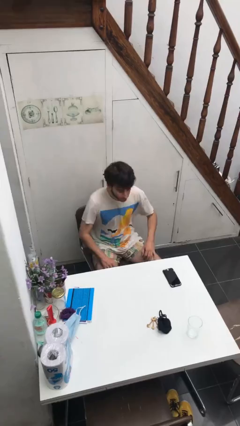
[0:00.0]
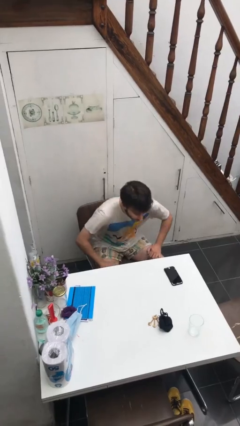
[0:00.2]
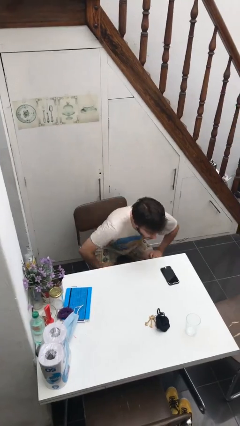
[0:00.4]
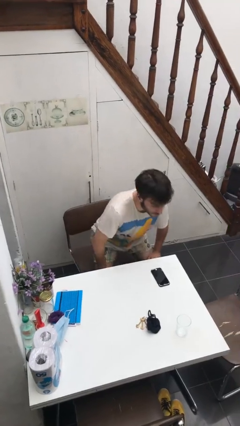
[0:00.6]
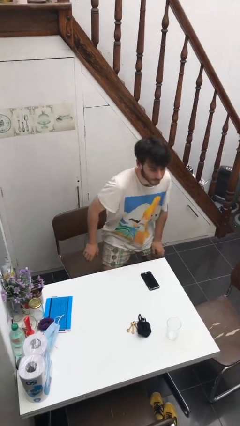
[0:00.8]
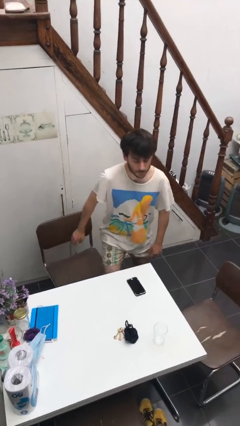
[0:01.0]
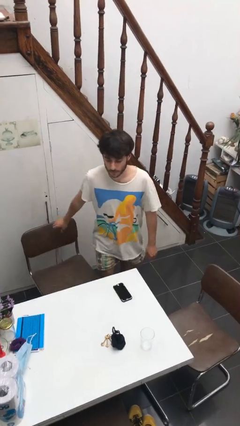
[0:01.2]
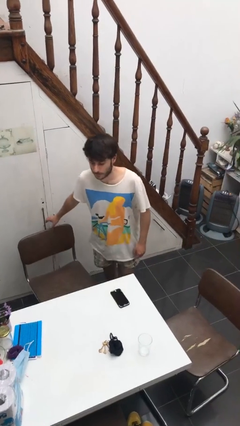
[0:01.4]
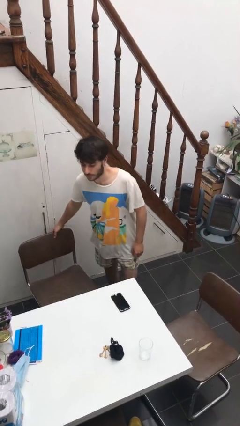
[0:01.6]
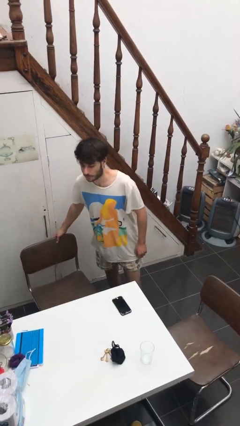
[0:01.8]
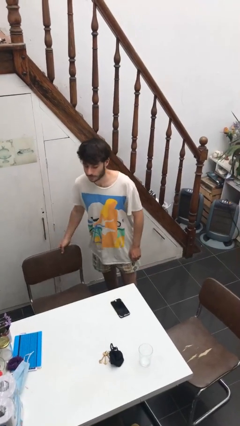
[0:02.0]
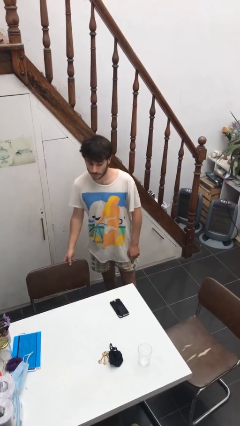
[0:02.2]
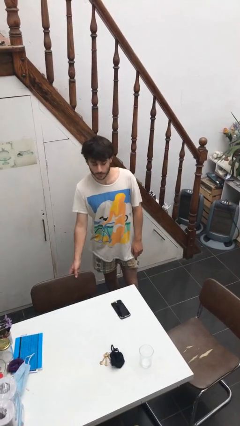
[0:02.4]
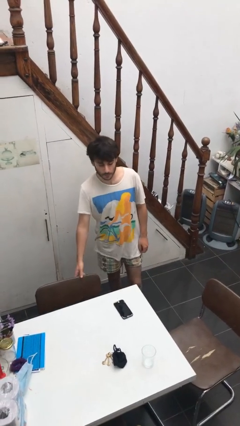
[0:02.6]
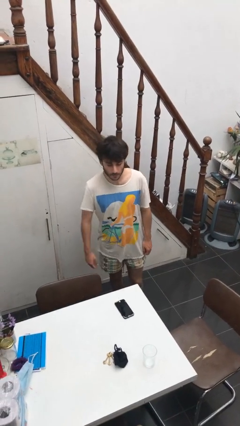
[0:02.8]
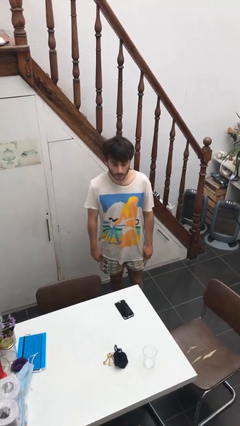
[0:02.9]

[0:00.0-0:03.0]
person stands up

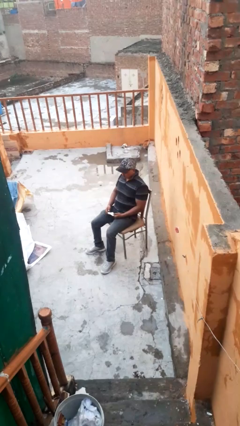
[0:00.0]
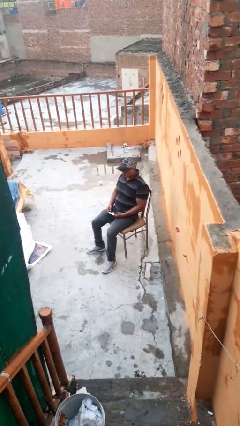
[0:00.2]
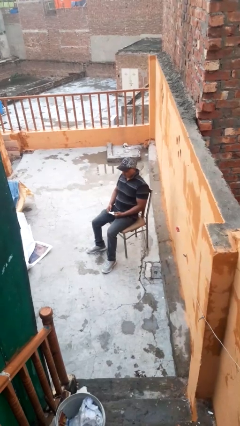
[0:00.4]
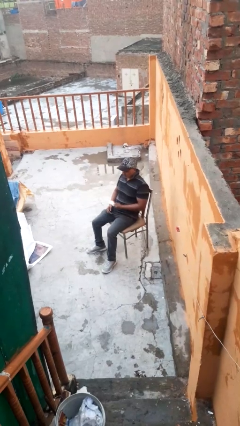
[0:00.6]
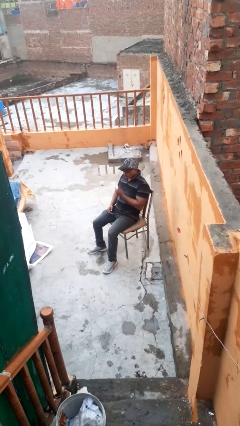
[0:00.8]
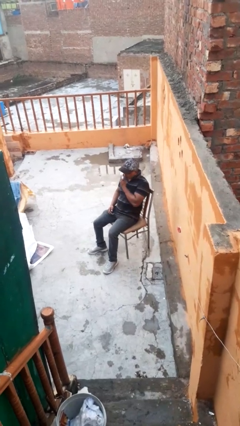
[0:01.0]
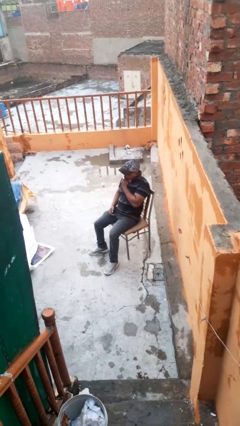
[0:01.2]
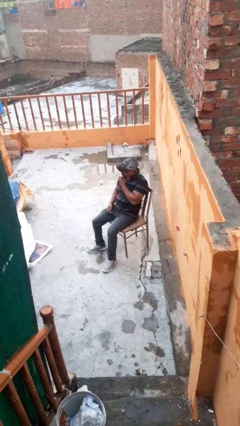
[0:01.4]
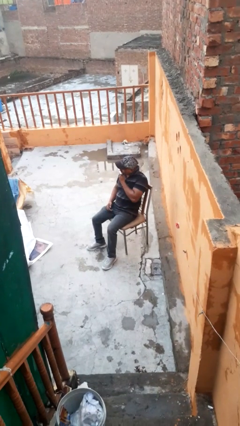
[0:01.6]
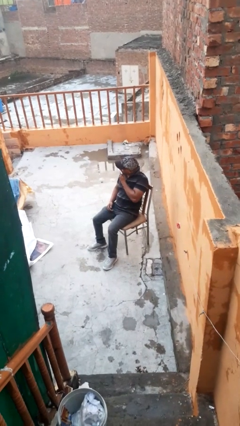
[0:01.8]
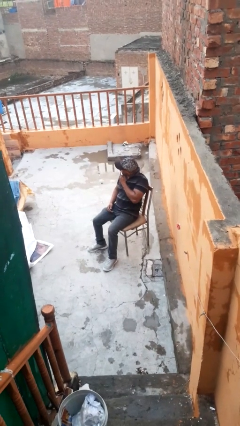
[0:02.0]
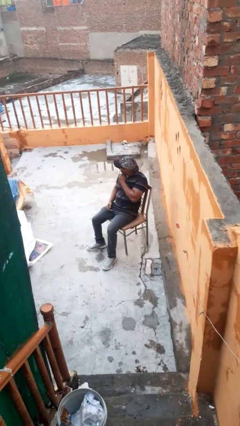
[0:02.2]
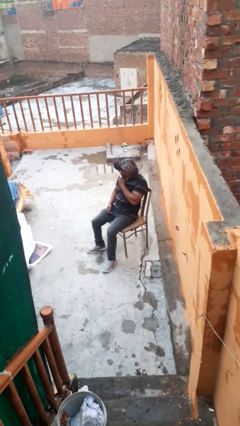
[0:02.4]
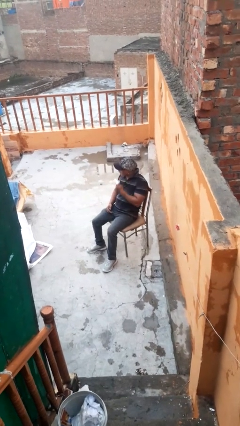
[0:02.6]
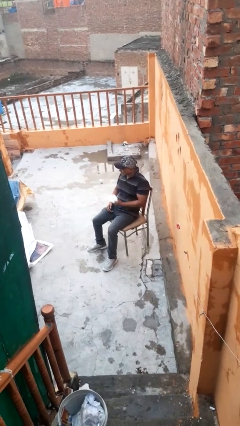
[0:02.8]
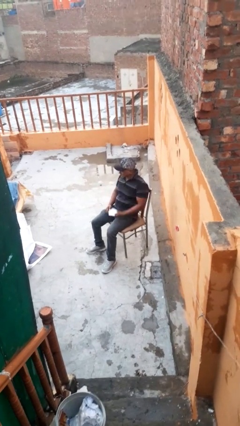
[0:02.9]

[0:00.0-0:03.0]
person wipes mouth with napkin

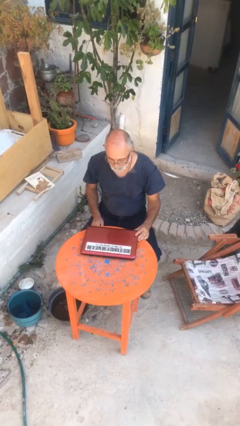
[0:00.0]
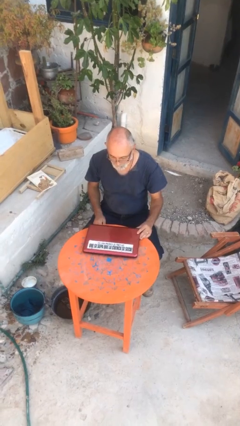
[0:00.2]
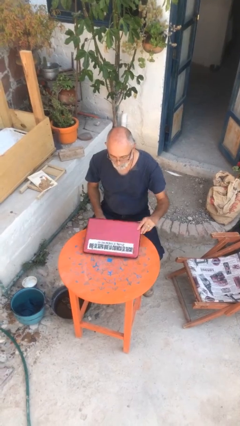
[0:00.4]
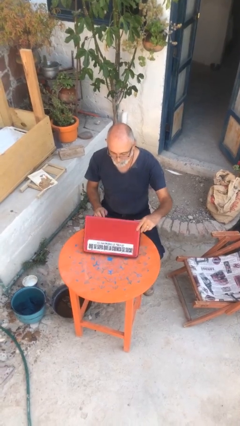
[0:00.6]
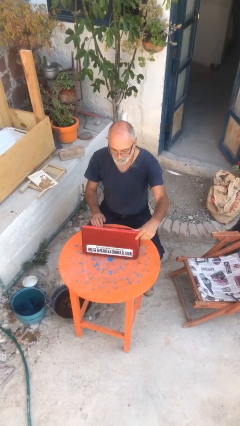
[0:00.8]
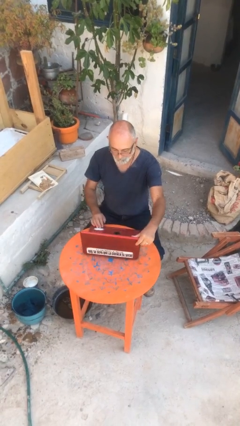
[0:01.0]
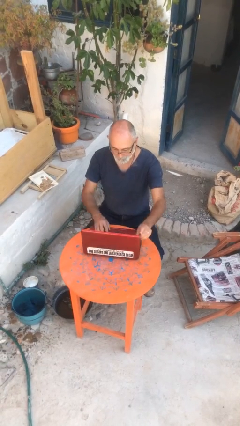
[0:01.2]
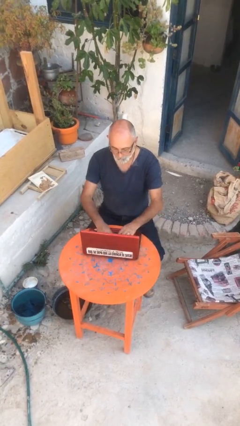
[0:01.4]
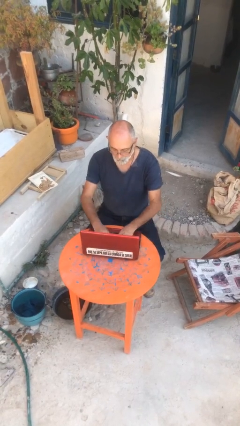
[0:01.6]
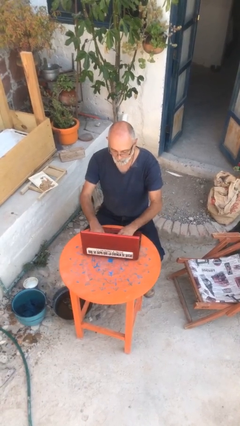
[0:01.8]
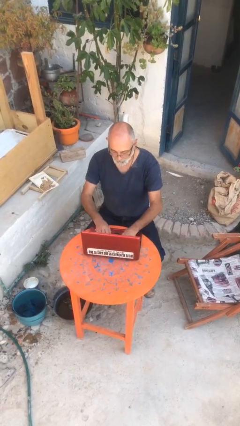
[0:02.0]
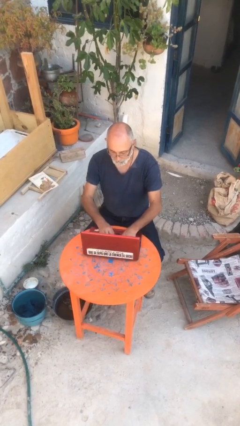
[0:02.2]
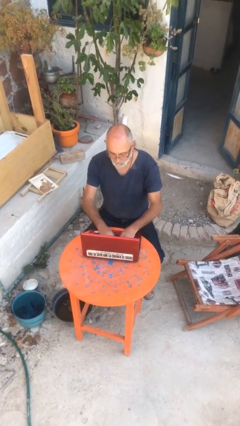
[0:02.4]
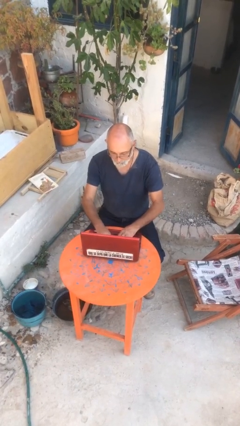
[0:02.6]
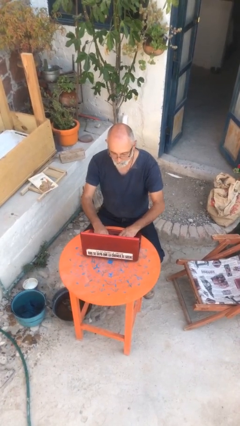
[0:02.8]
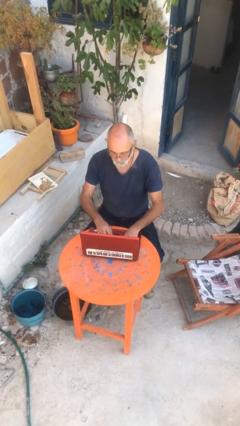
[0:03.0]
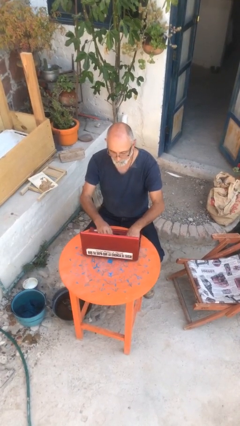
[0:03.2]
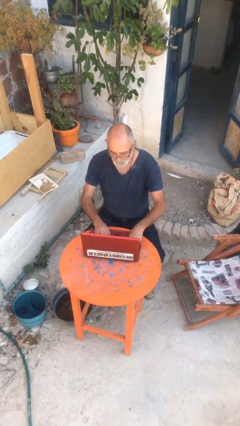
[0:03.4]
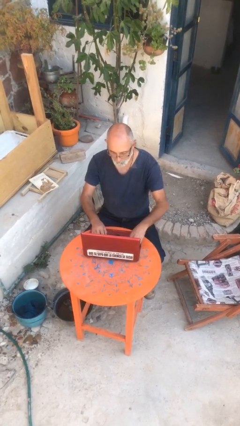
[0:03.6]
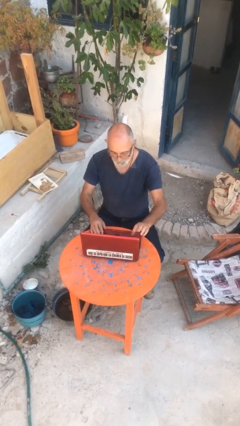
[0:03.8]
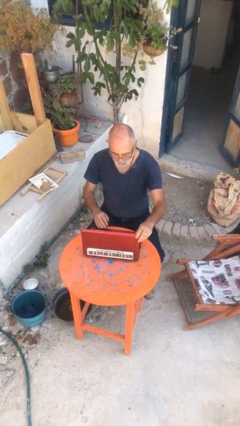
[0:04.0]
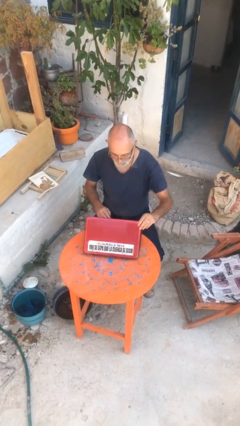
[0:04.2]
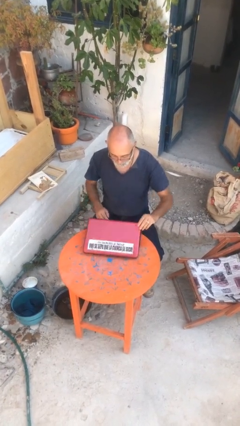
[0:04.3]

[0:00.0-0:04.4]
person interacts with laptop

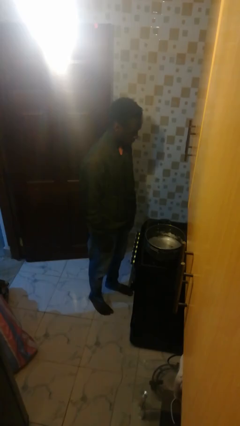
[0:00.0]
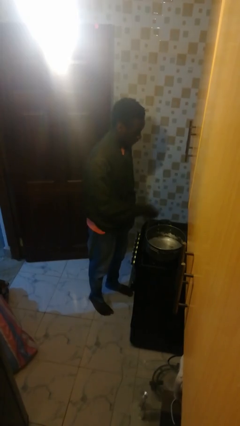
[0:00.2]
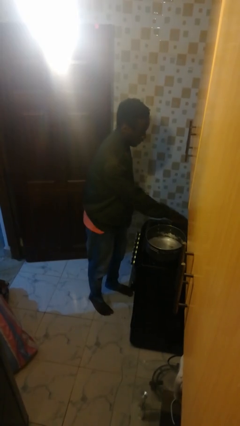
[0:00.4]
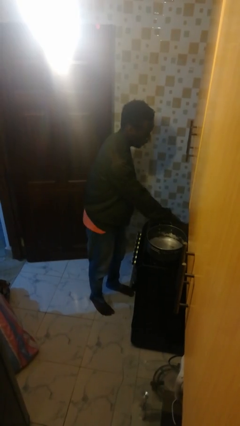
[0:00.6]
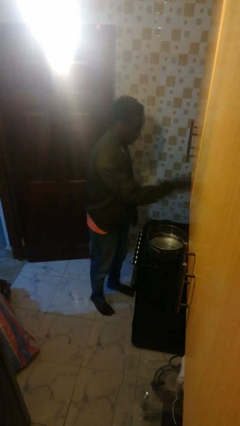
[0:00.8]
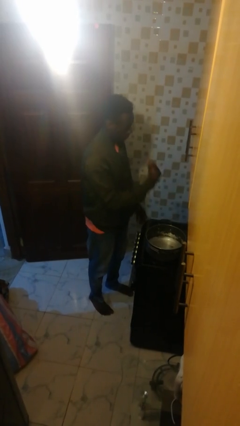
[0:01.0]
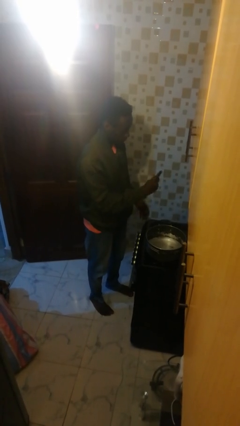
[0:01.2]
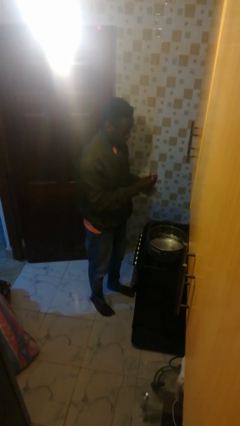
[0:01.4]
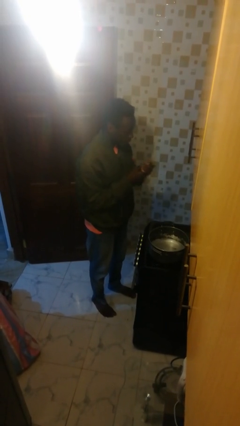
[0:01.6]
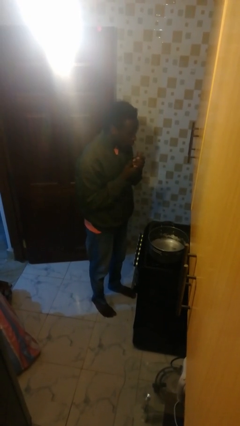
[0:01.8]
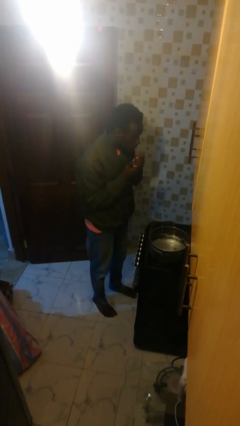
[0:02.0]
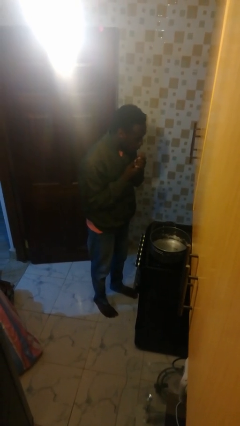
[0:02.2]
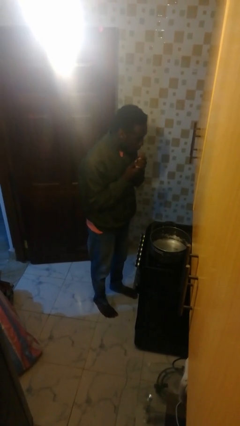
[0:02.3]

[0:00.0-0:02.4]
person burns hand

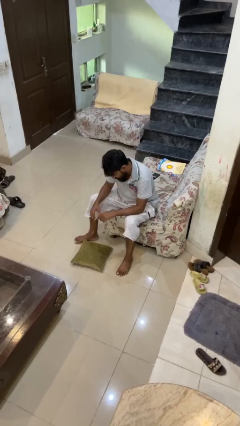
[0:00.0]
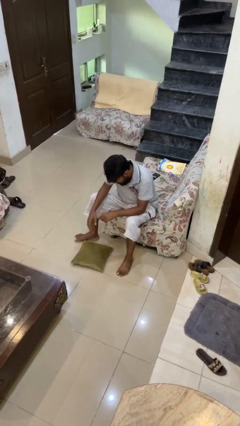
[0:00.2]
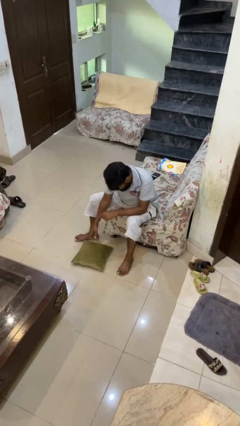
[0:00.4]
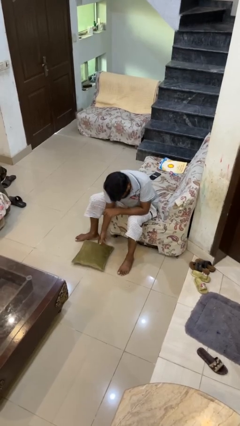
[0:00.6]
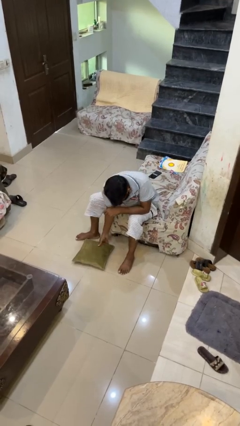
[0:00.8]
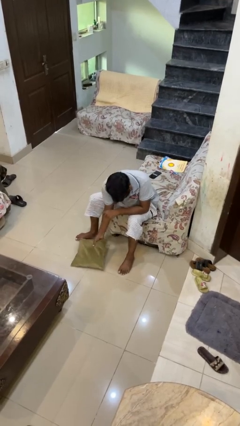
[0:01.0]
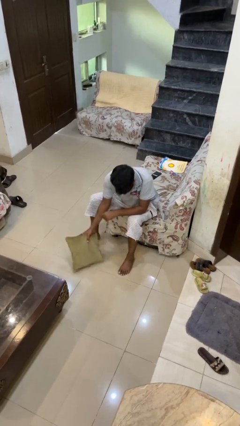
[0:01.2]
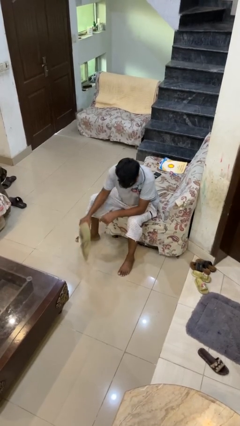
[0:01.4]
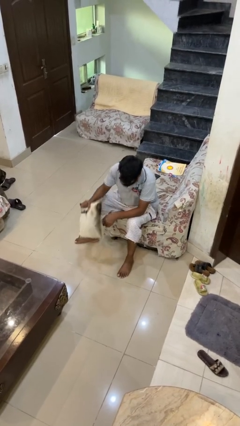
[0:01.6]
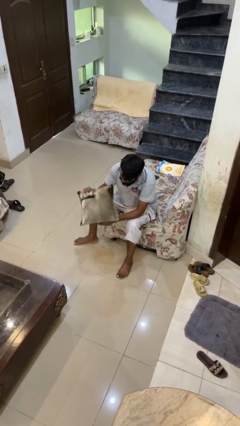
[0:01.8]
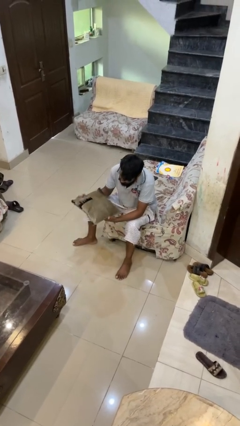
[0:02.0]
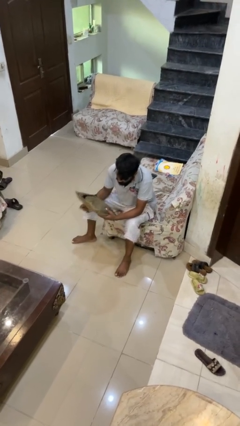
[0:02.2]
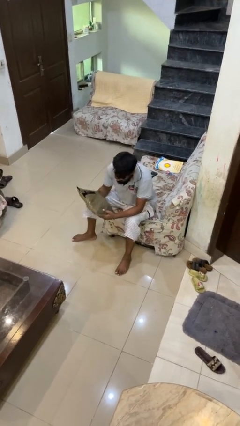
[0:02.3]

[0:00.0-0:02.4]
person picks up object from floor

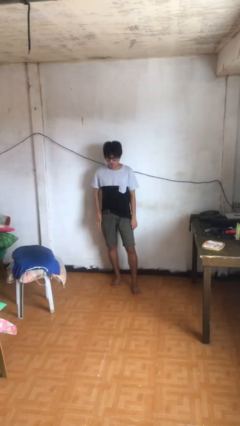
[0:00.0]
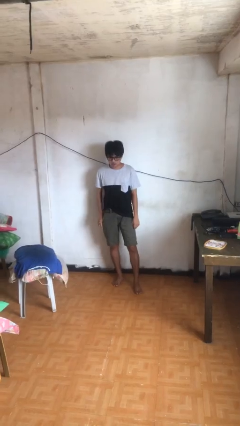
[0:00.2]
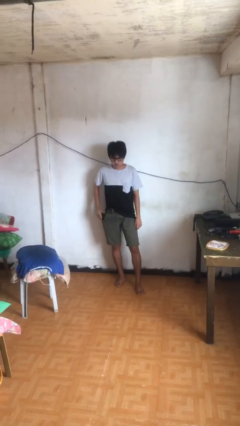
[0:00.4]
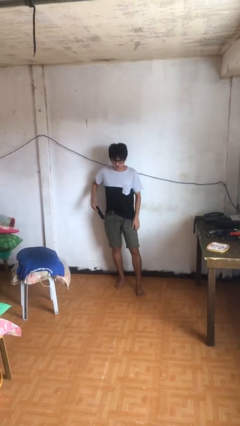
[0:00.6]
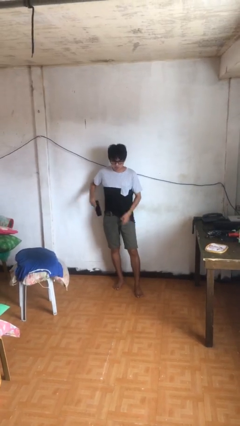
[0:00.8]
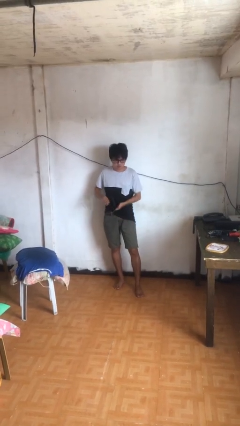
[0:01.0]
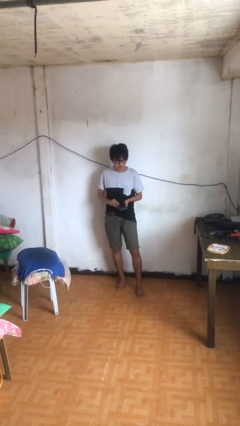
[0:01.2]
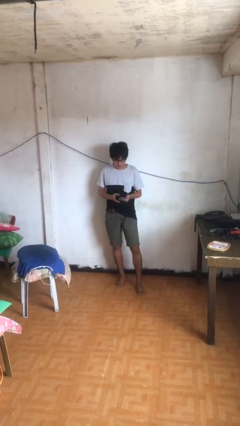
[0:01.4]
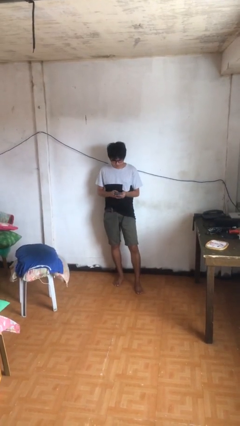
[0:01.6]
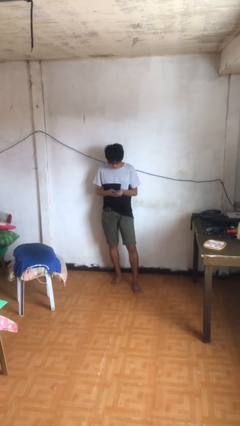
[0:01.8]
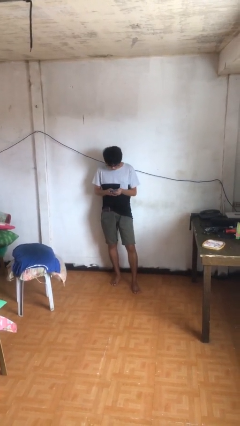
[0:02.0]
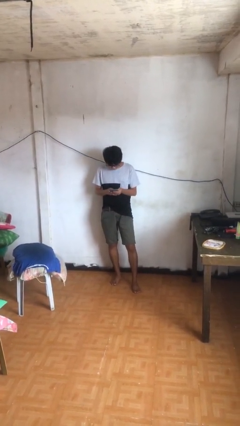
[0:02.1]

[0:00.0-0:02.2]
person takes phone from pocket
